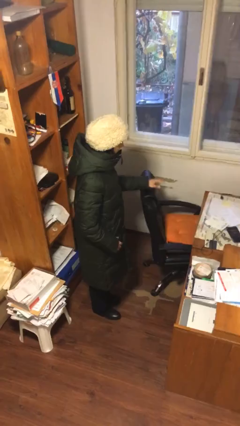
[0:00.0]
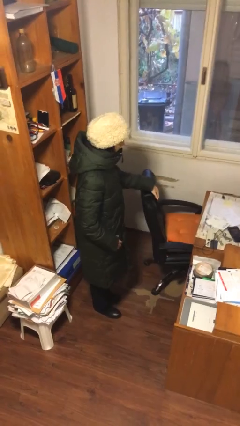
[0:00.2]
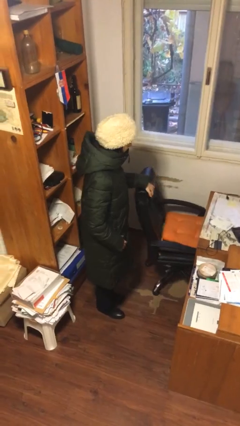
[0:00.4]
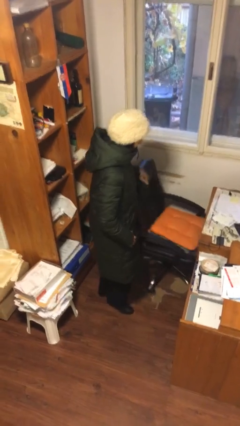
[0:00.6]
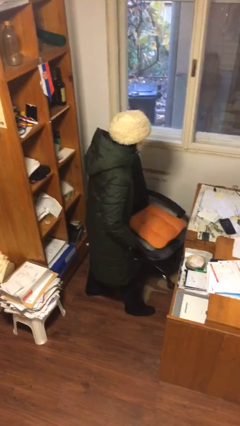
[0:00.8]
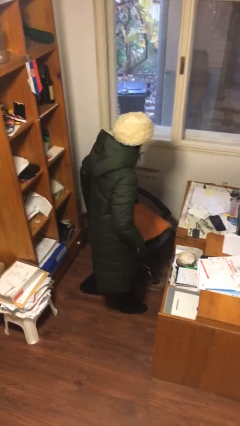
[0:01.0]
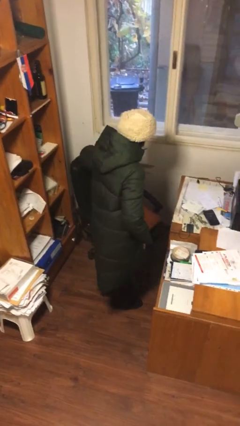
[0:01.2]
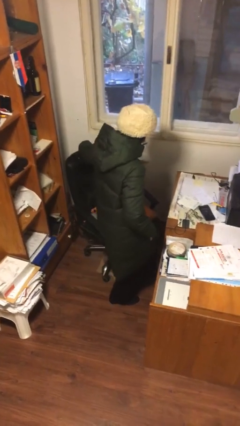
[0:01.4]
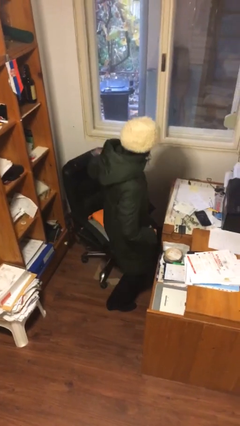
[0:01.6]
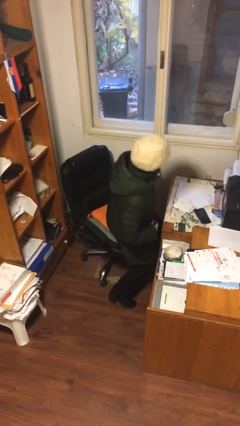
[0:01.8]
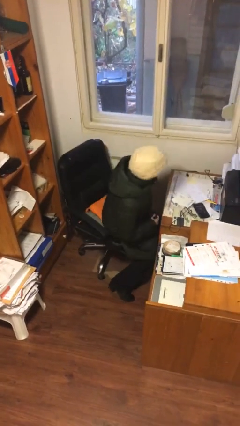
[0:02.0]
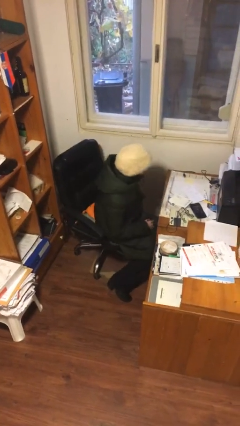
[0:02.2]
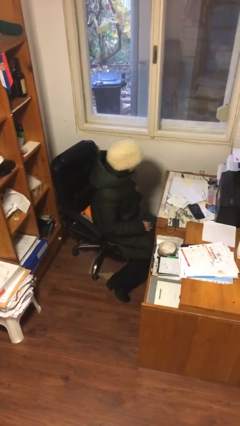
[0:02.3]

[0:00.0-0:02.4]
person sits down

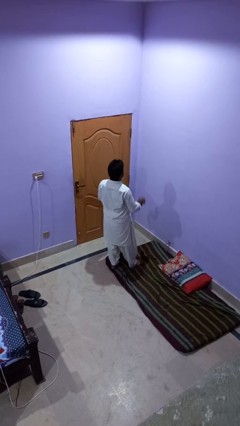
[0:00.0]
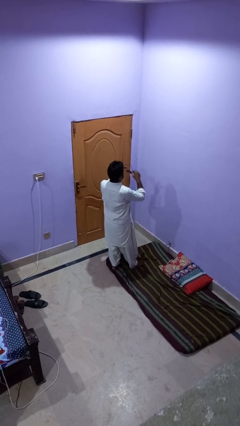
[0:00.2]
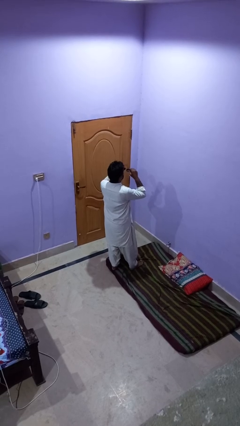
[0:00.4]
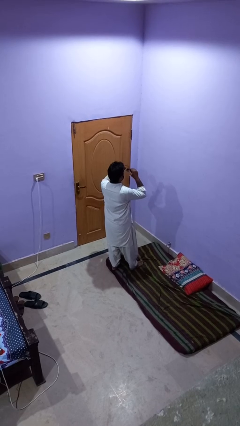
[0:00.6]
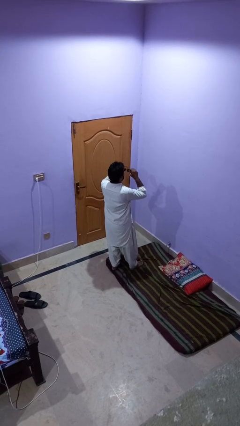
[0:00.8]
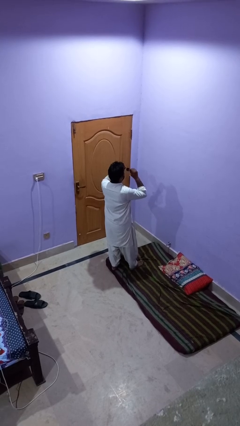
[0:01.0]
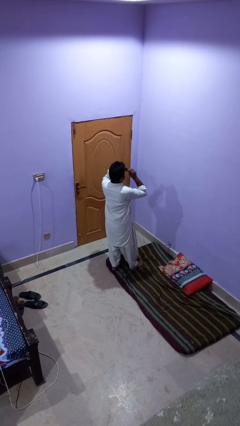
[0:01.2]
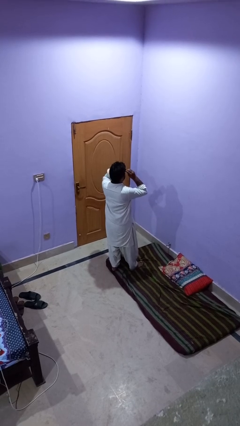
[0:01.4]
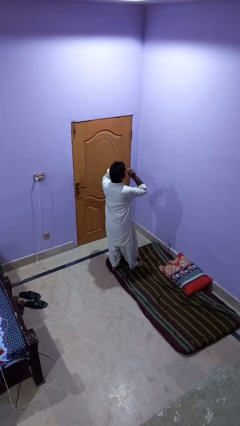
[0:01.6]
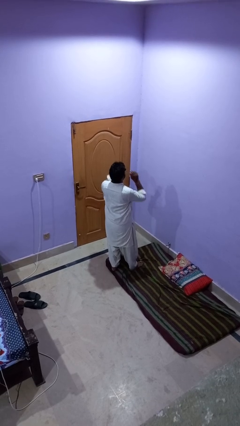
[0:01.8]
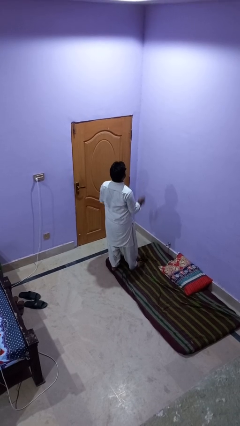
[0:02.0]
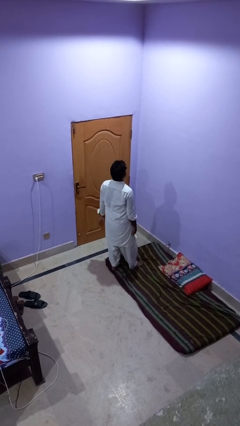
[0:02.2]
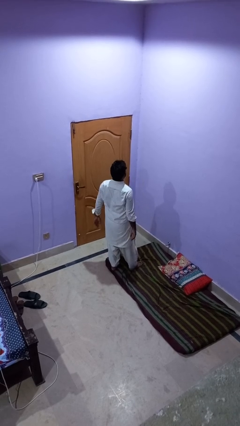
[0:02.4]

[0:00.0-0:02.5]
person puts on sunglasses

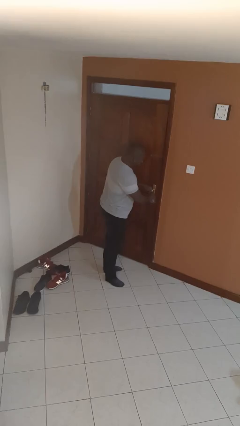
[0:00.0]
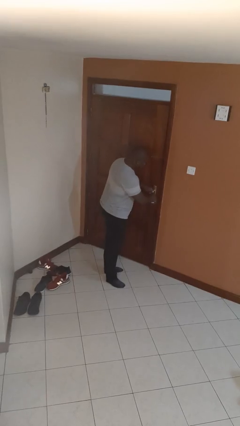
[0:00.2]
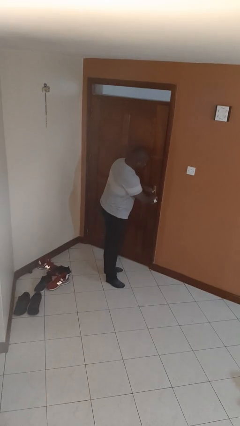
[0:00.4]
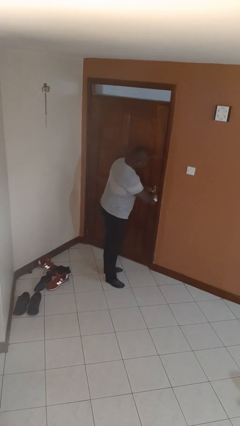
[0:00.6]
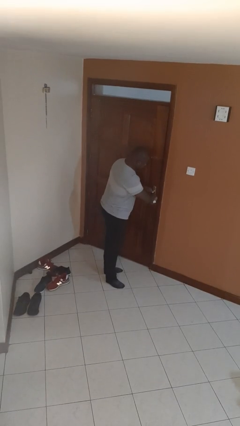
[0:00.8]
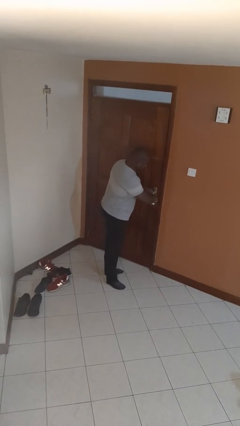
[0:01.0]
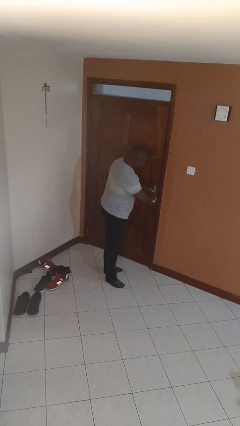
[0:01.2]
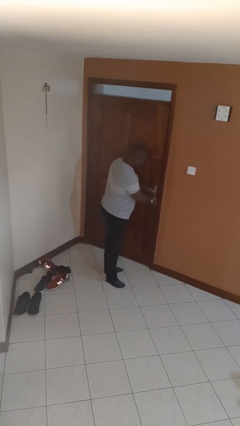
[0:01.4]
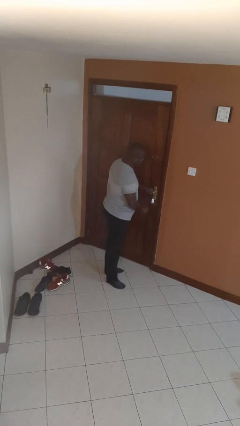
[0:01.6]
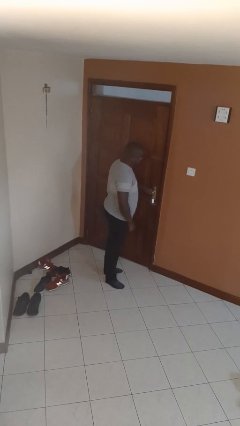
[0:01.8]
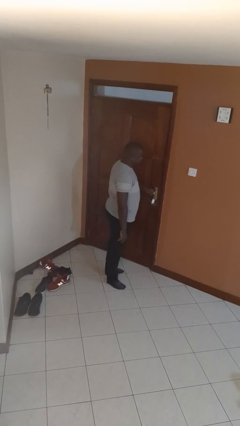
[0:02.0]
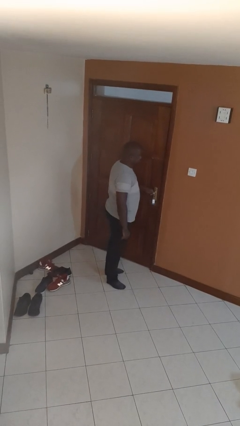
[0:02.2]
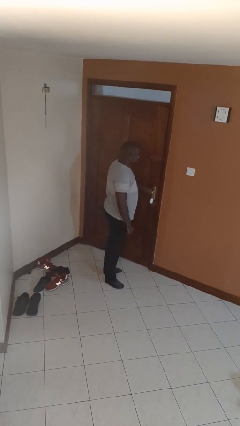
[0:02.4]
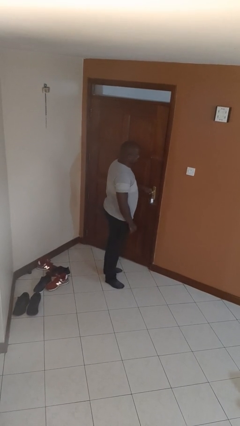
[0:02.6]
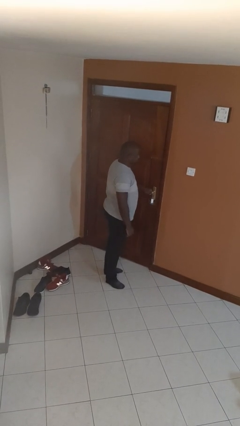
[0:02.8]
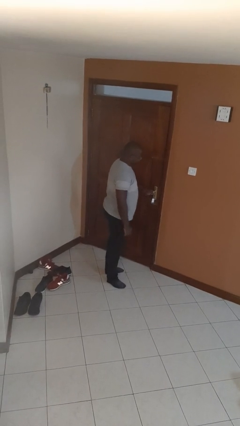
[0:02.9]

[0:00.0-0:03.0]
person unlocks door with keys

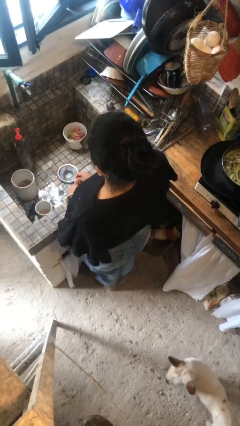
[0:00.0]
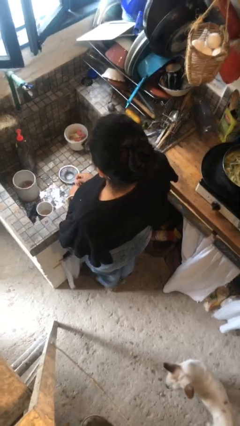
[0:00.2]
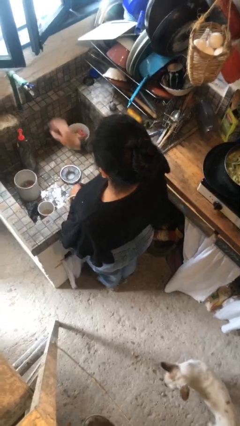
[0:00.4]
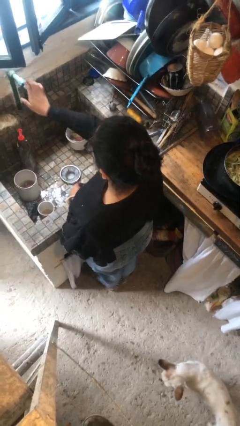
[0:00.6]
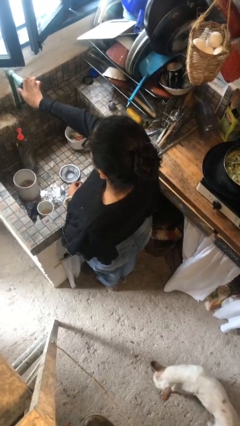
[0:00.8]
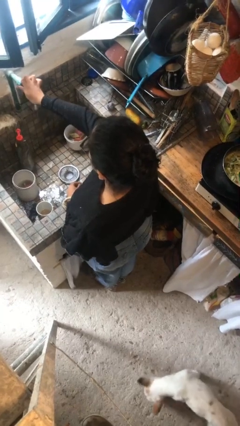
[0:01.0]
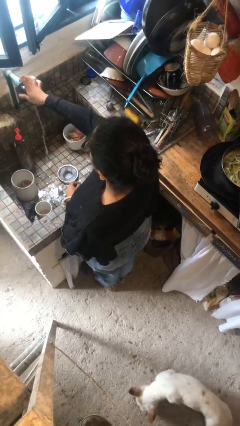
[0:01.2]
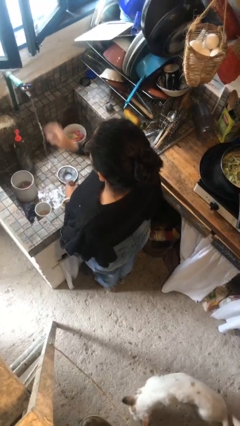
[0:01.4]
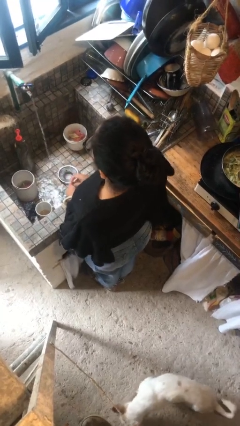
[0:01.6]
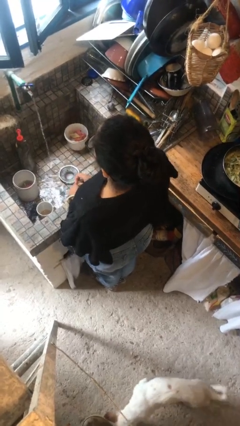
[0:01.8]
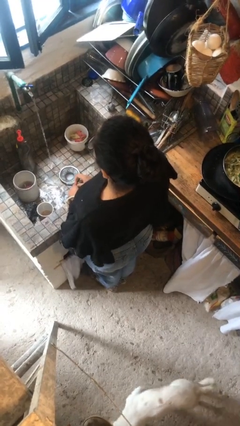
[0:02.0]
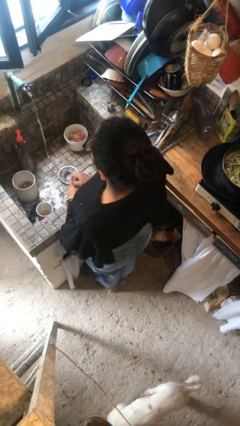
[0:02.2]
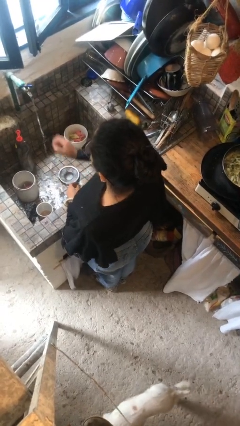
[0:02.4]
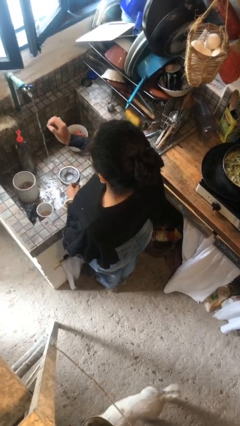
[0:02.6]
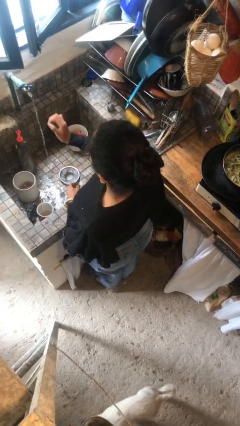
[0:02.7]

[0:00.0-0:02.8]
person turns on faucet

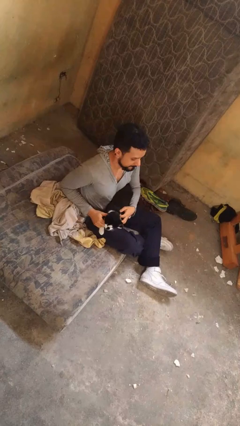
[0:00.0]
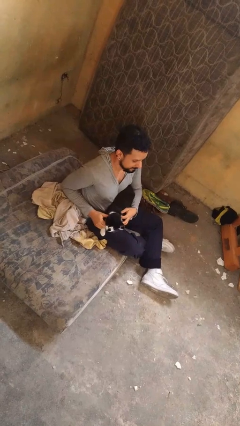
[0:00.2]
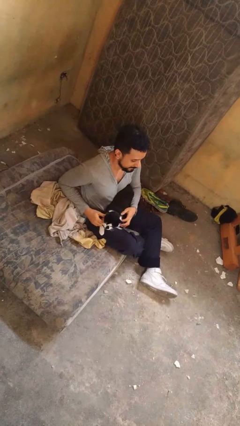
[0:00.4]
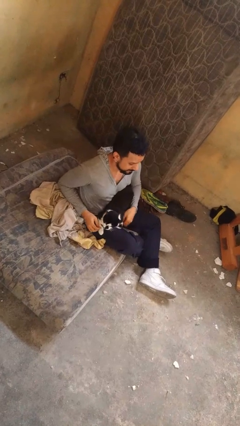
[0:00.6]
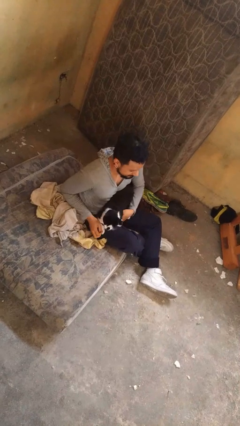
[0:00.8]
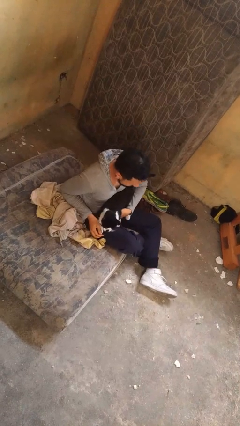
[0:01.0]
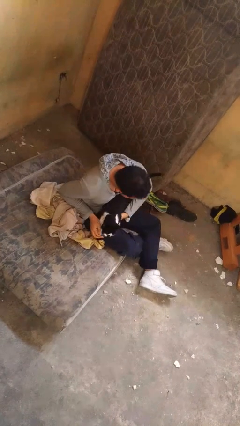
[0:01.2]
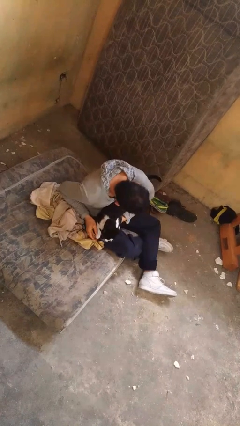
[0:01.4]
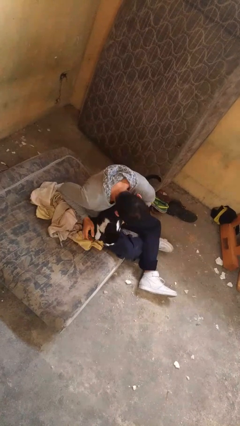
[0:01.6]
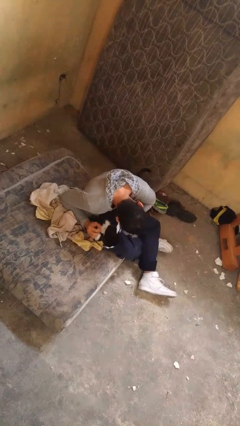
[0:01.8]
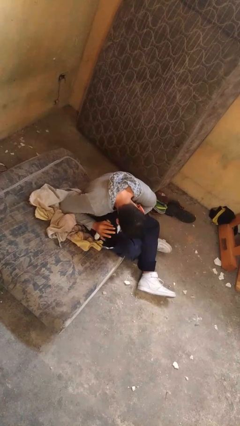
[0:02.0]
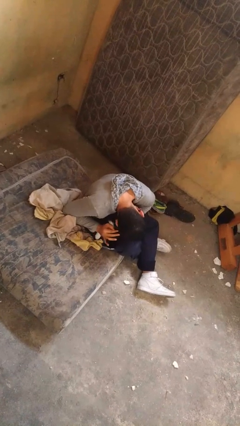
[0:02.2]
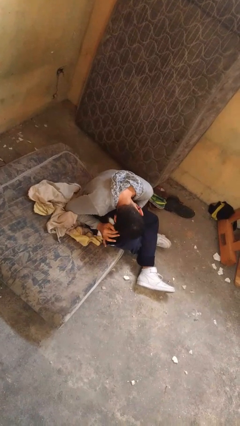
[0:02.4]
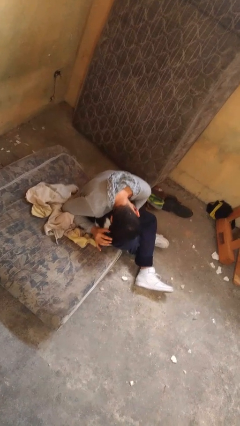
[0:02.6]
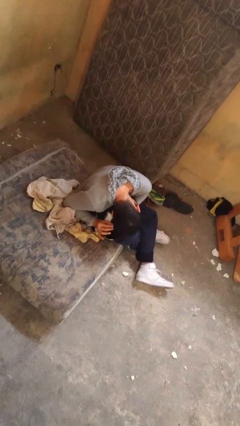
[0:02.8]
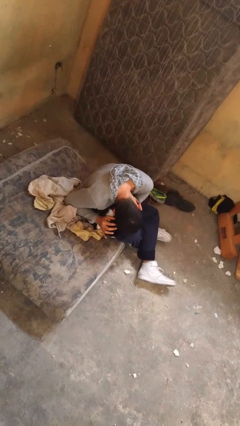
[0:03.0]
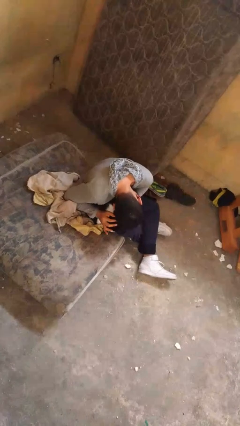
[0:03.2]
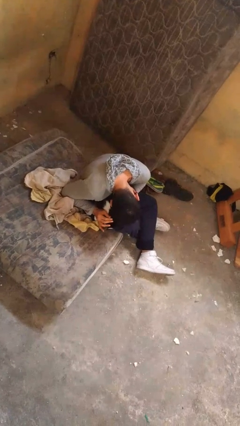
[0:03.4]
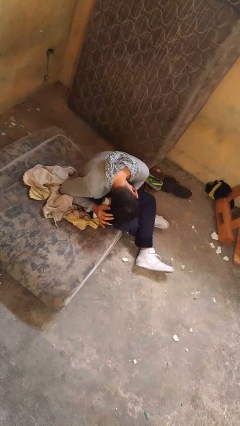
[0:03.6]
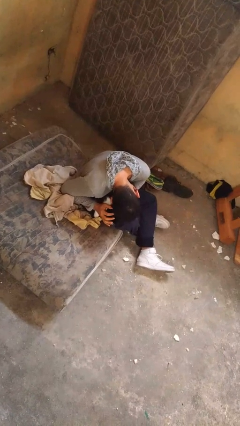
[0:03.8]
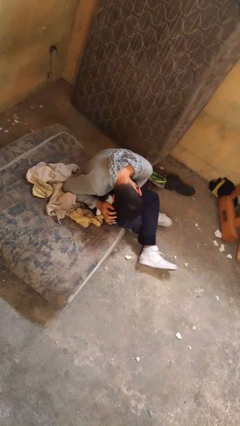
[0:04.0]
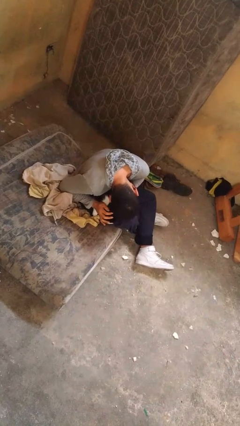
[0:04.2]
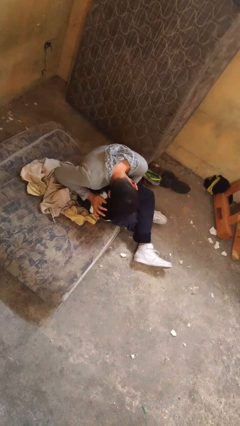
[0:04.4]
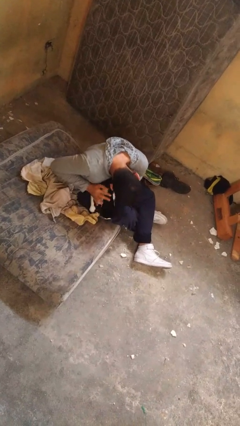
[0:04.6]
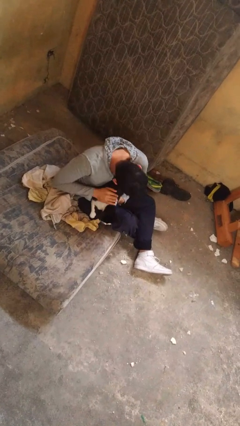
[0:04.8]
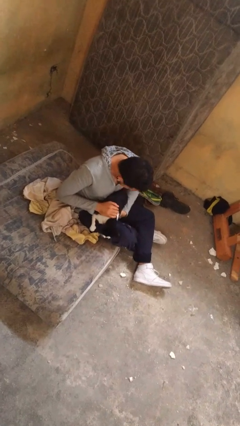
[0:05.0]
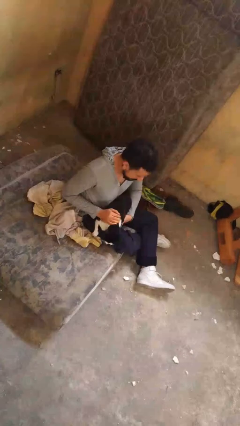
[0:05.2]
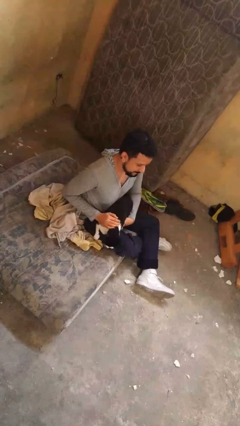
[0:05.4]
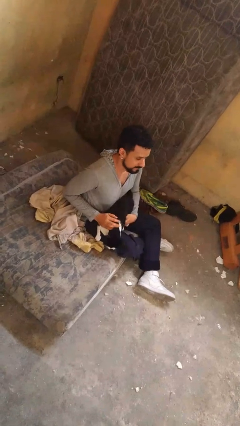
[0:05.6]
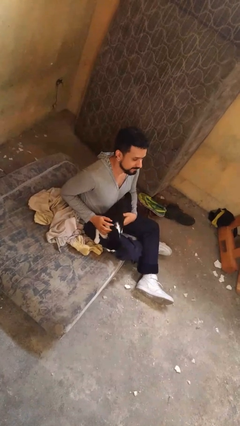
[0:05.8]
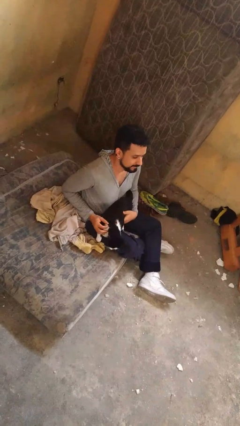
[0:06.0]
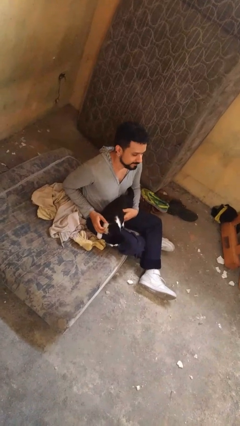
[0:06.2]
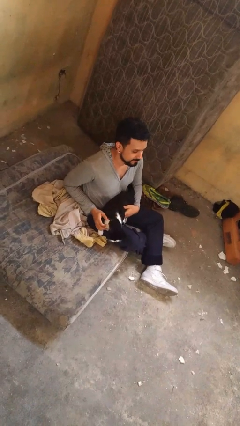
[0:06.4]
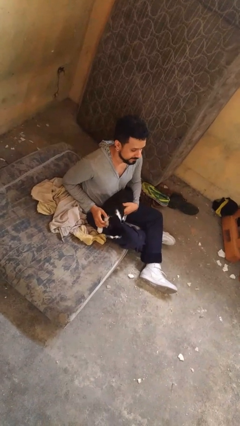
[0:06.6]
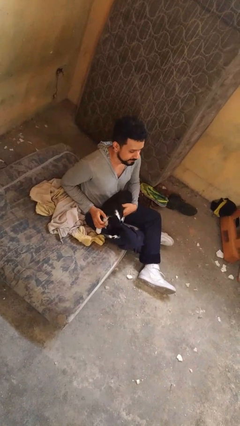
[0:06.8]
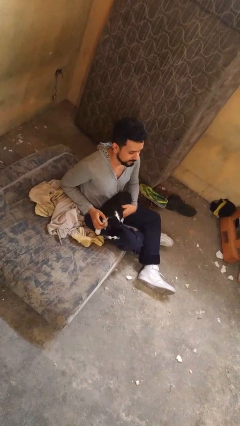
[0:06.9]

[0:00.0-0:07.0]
person hugs cat
